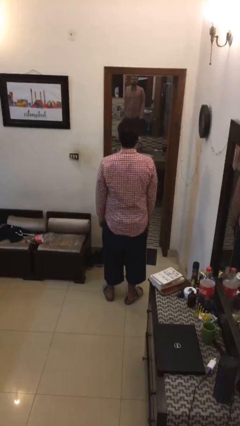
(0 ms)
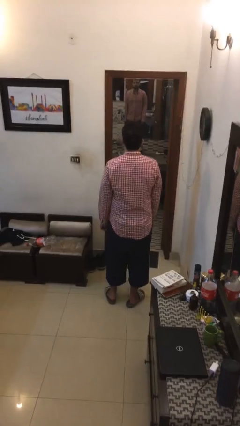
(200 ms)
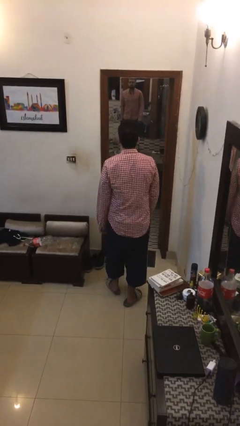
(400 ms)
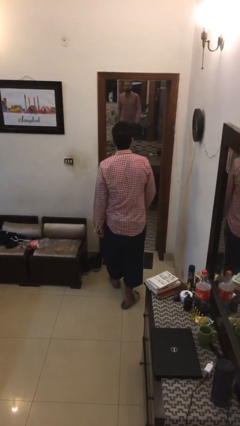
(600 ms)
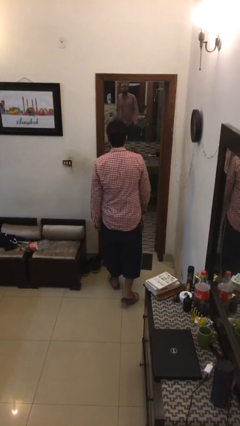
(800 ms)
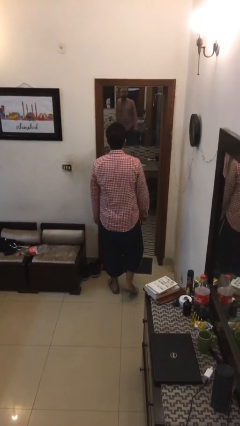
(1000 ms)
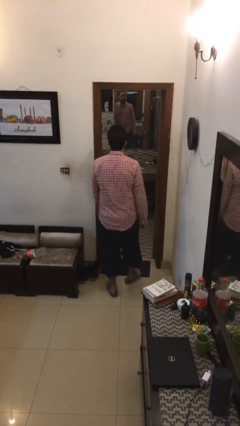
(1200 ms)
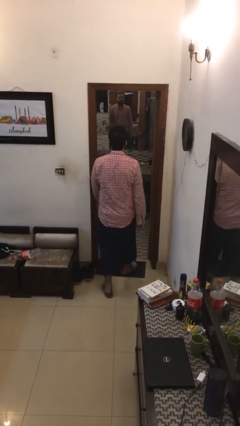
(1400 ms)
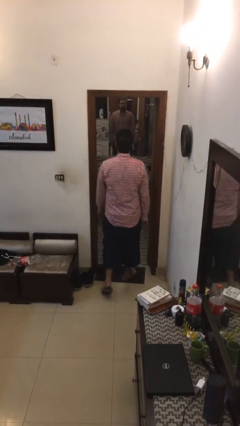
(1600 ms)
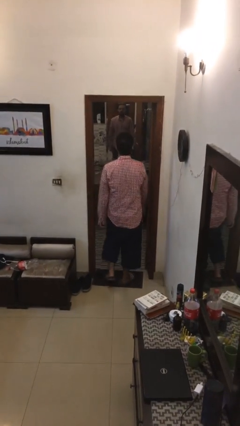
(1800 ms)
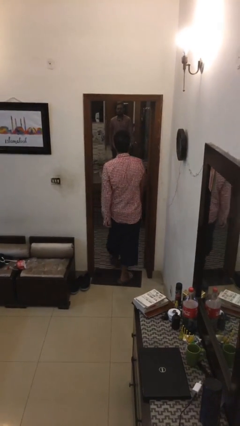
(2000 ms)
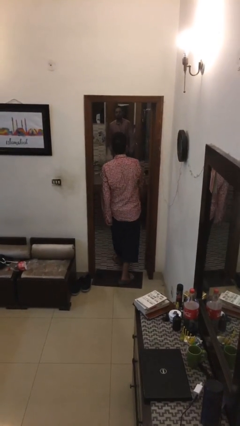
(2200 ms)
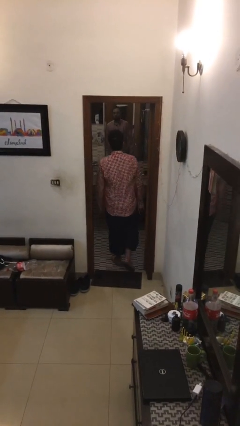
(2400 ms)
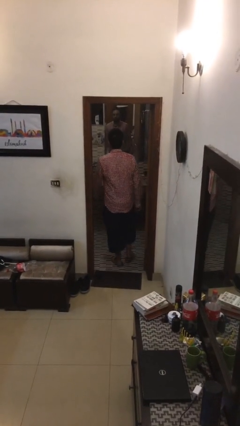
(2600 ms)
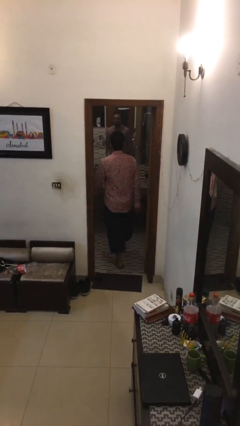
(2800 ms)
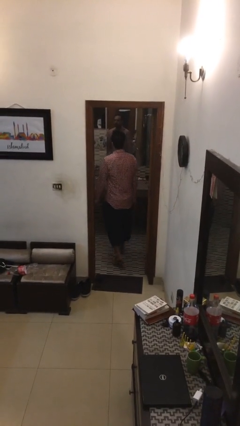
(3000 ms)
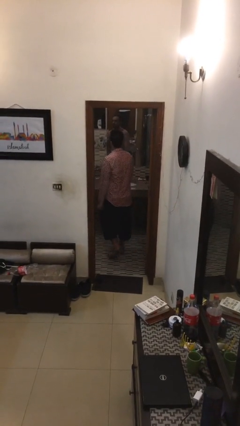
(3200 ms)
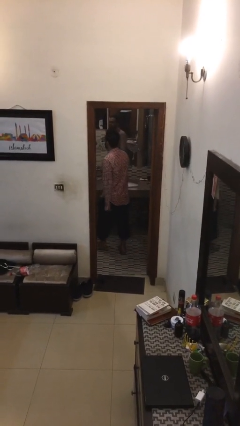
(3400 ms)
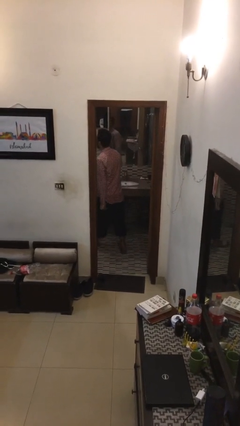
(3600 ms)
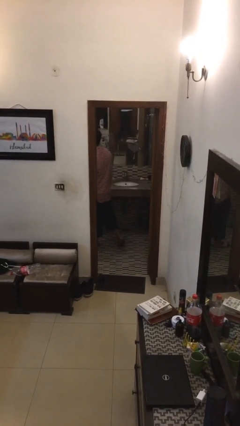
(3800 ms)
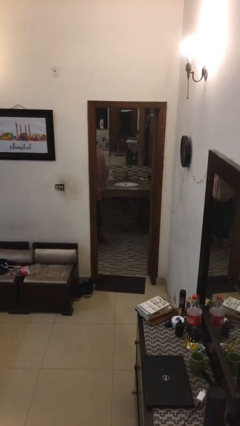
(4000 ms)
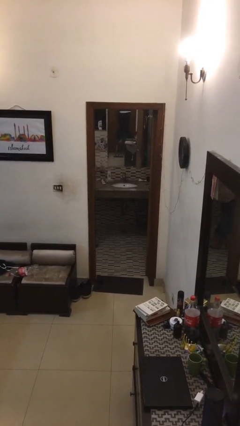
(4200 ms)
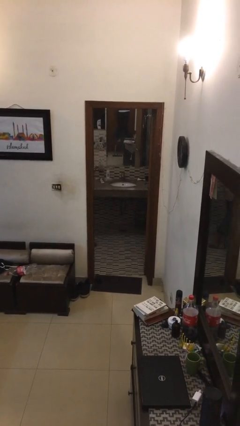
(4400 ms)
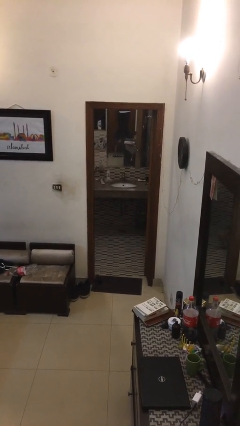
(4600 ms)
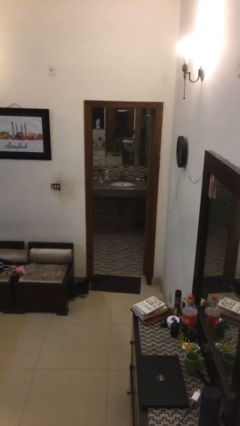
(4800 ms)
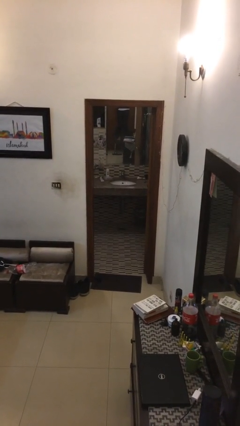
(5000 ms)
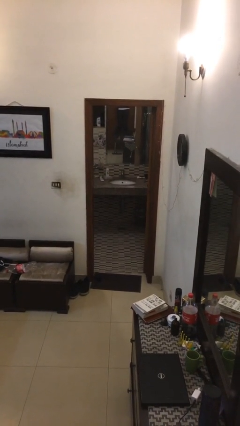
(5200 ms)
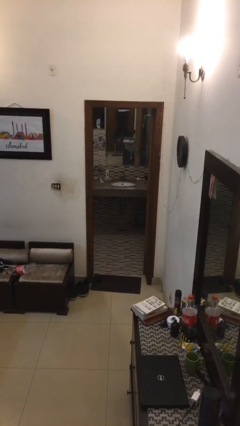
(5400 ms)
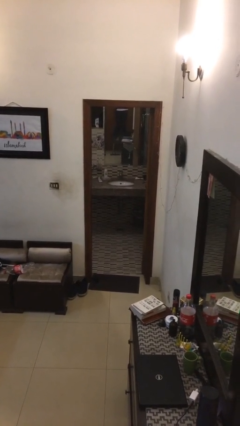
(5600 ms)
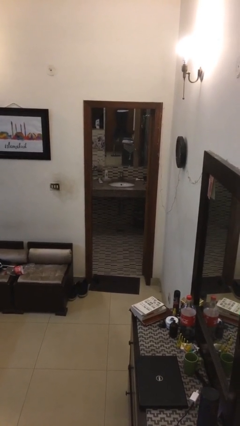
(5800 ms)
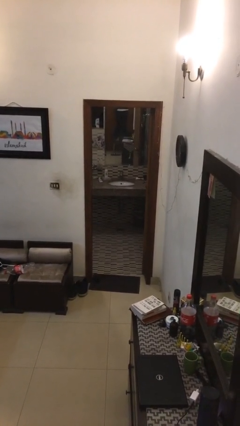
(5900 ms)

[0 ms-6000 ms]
person exits scene through structure

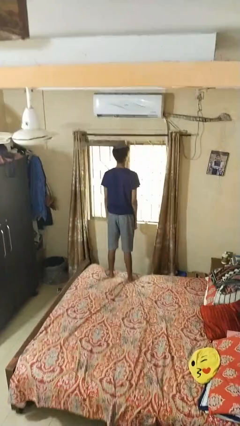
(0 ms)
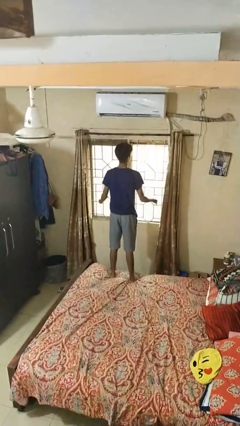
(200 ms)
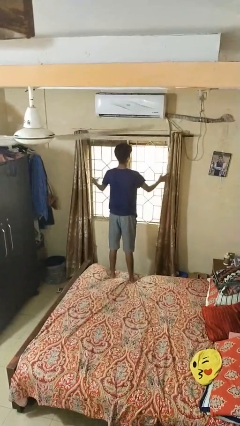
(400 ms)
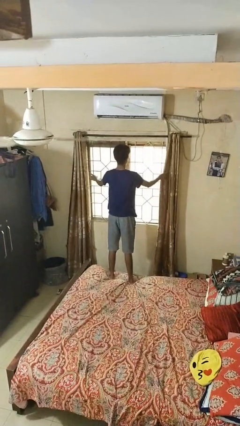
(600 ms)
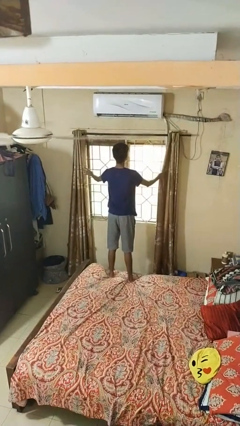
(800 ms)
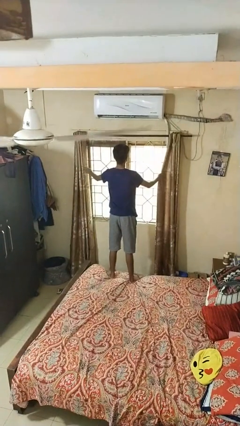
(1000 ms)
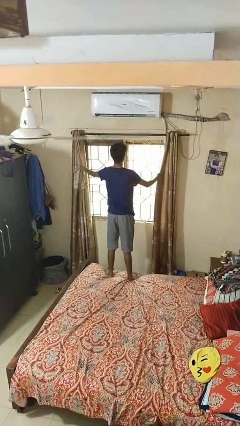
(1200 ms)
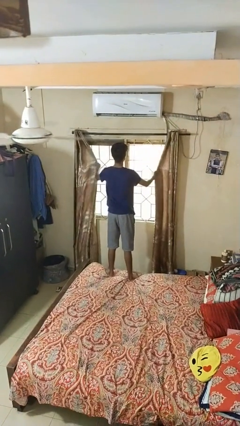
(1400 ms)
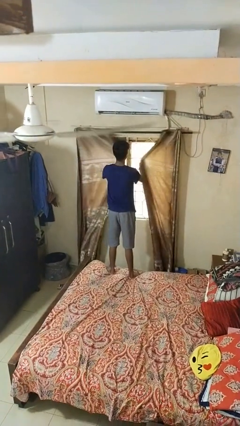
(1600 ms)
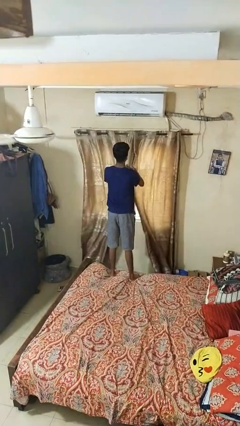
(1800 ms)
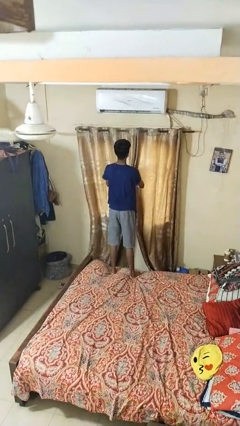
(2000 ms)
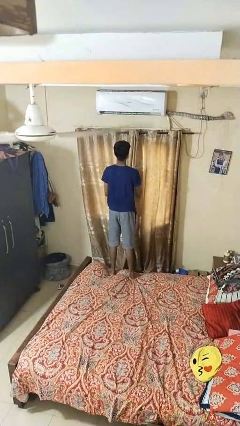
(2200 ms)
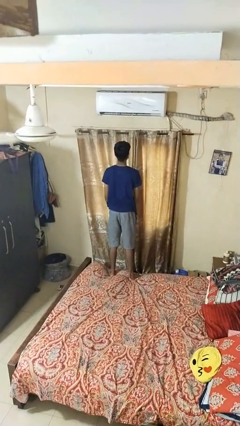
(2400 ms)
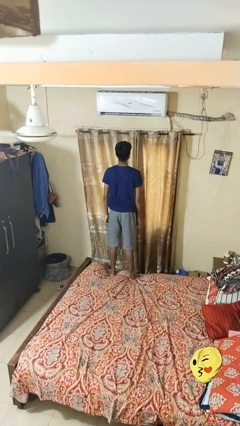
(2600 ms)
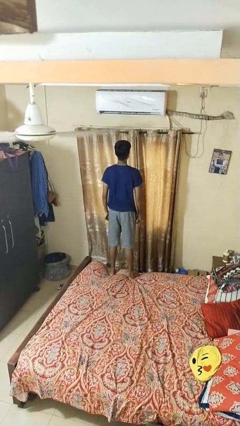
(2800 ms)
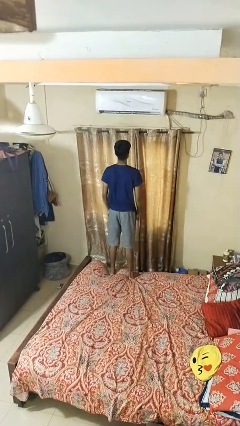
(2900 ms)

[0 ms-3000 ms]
person closes curtains

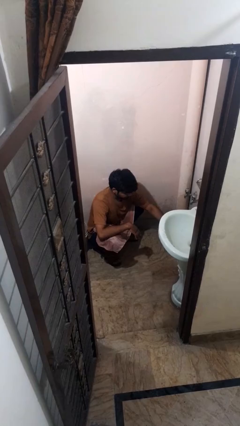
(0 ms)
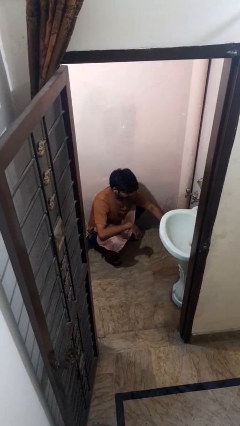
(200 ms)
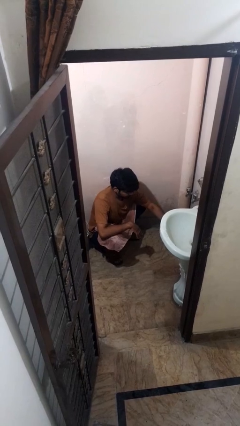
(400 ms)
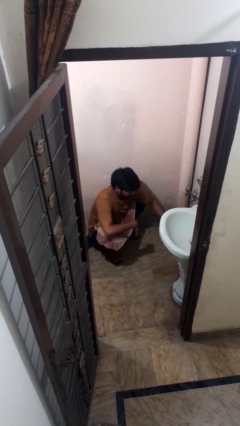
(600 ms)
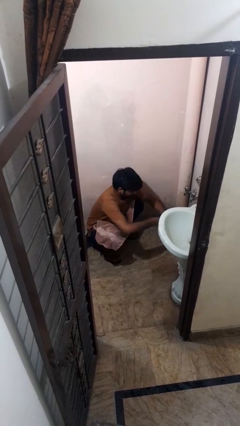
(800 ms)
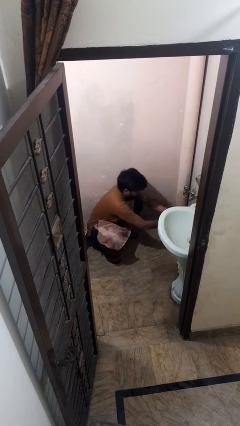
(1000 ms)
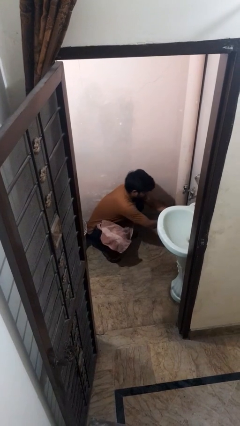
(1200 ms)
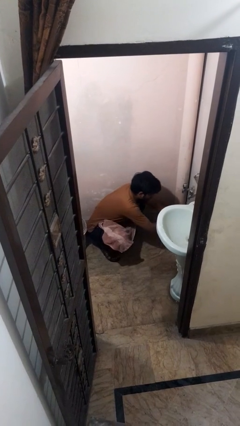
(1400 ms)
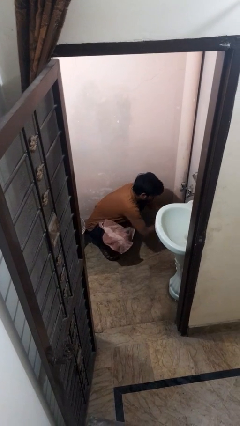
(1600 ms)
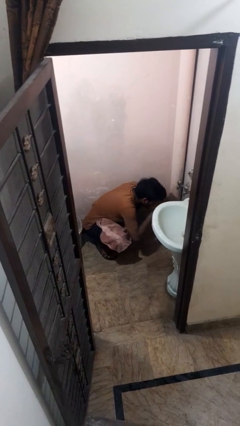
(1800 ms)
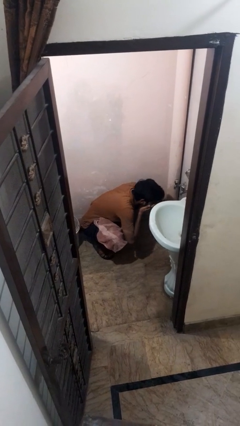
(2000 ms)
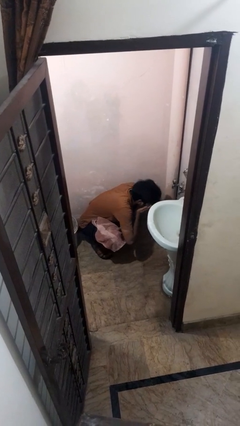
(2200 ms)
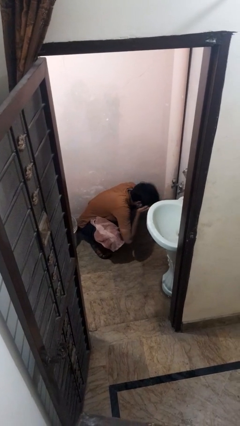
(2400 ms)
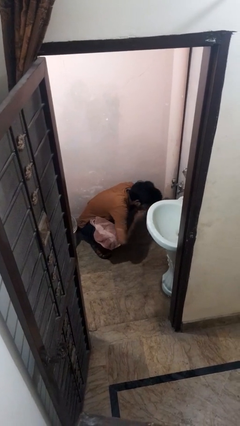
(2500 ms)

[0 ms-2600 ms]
person throws object on bed

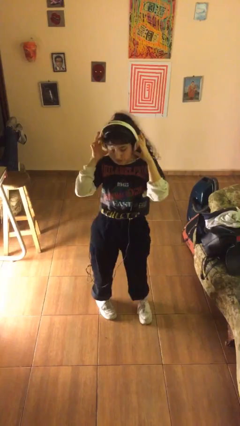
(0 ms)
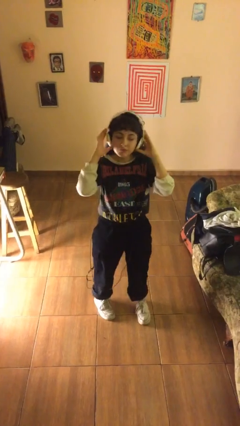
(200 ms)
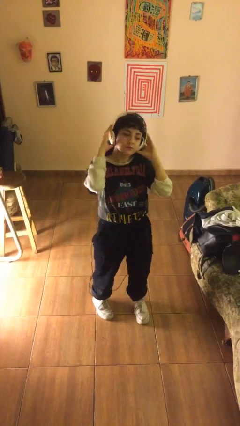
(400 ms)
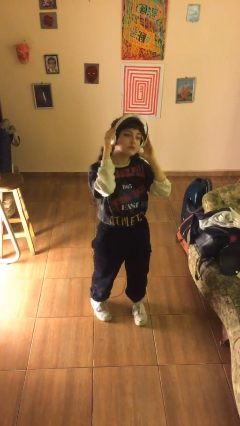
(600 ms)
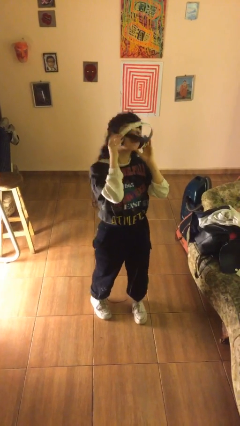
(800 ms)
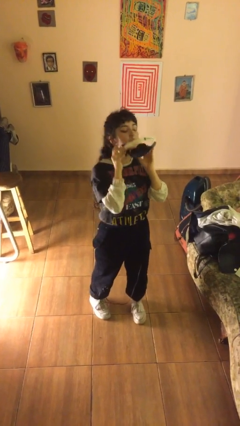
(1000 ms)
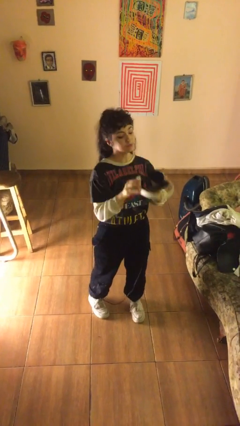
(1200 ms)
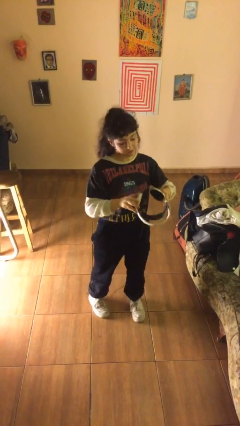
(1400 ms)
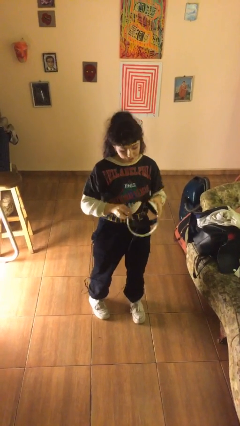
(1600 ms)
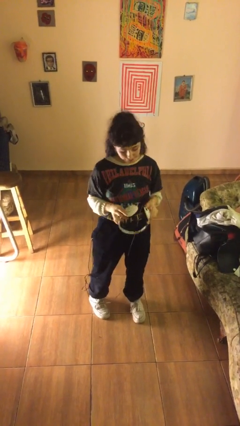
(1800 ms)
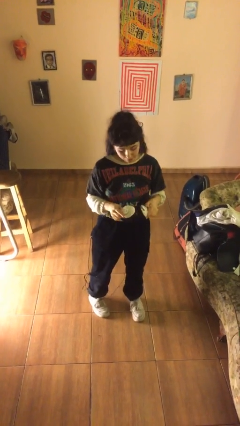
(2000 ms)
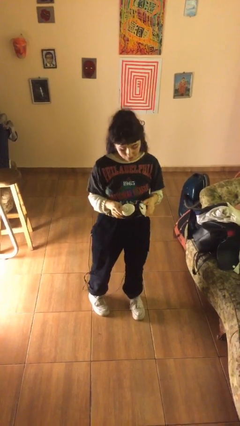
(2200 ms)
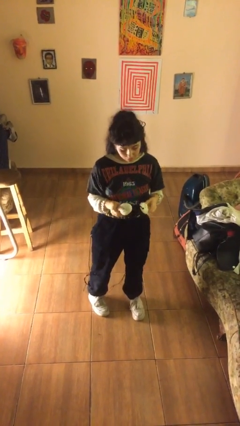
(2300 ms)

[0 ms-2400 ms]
person takes off headphones

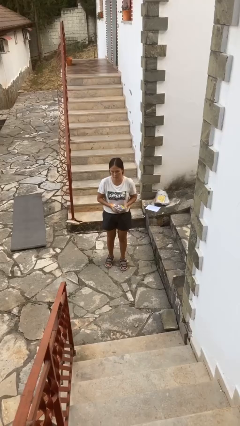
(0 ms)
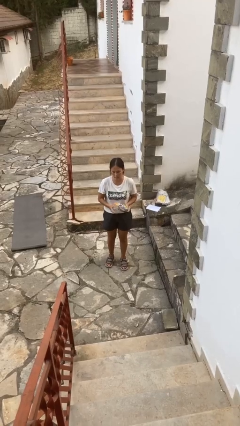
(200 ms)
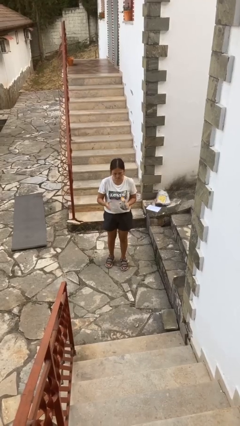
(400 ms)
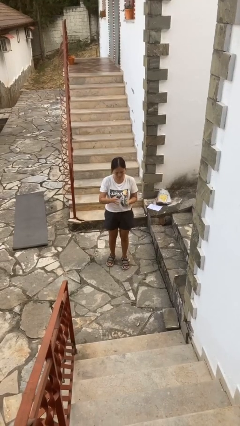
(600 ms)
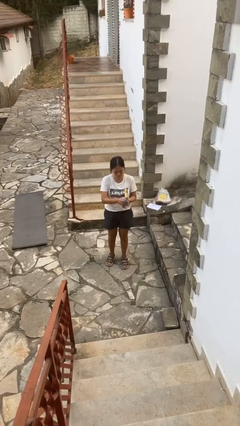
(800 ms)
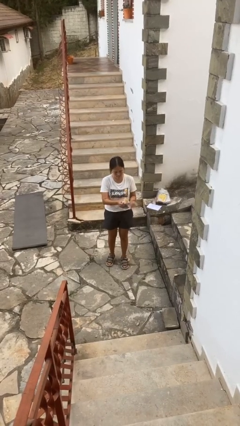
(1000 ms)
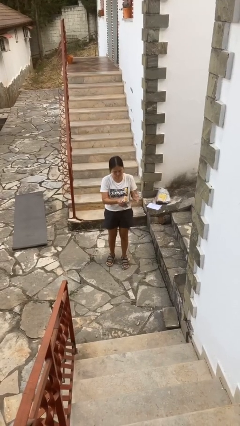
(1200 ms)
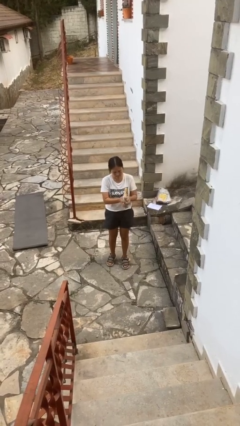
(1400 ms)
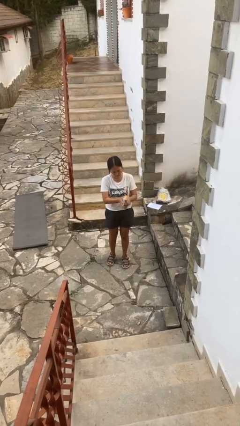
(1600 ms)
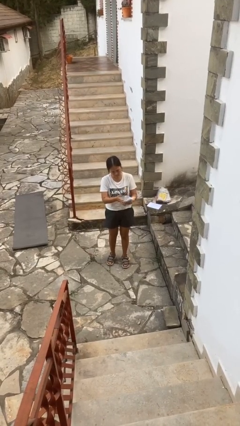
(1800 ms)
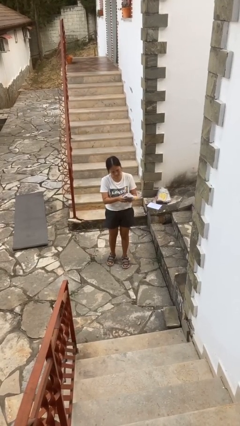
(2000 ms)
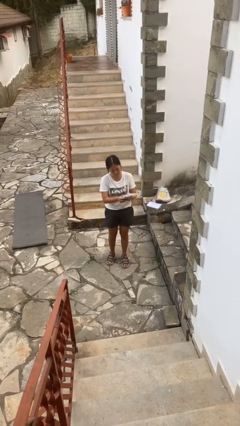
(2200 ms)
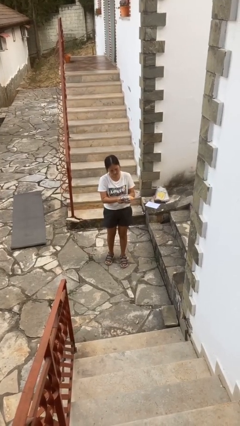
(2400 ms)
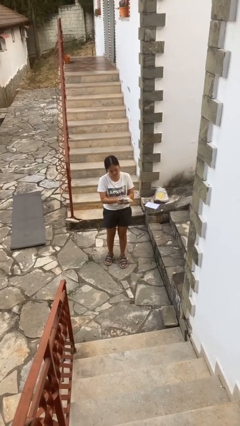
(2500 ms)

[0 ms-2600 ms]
person squeezes object

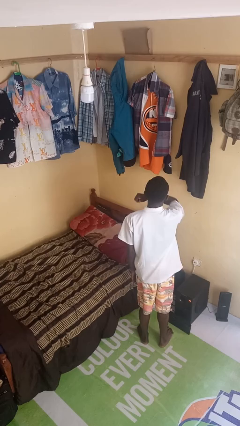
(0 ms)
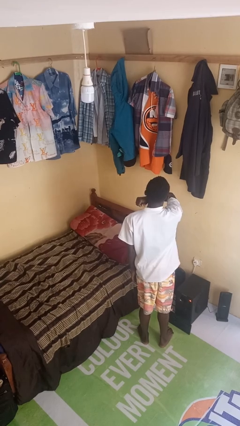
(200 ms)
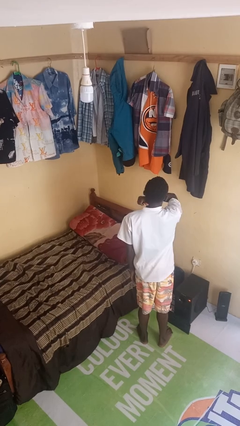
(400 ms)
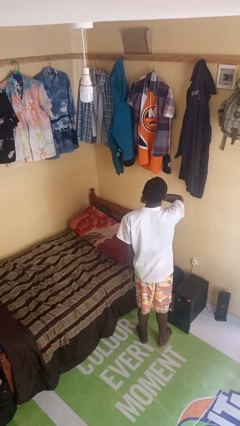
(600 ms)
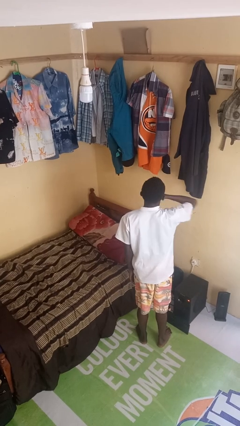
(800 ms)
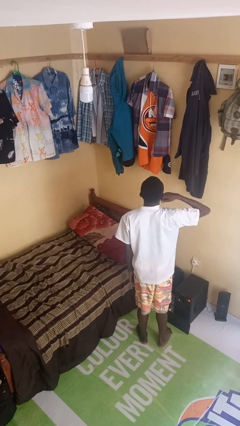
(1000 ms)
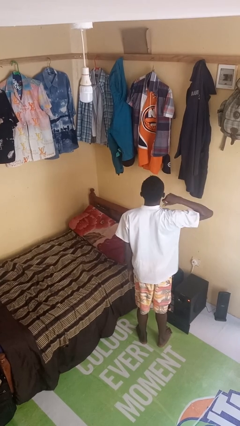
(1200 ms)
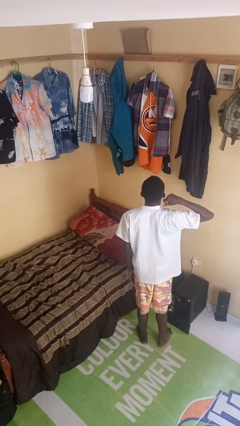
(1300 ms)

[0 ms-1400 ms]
person gestures cut
